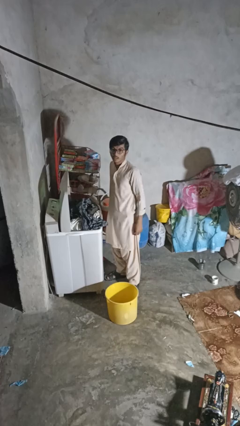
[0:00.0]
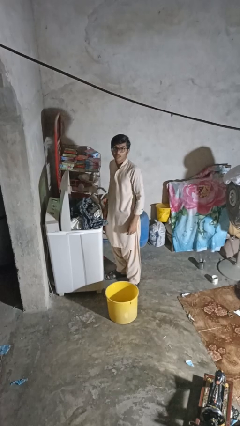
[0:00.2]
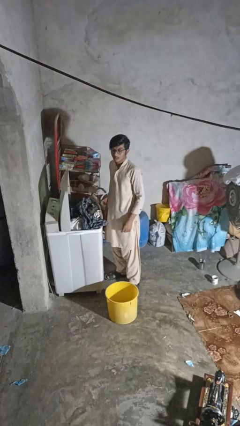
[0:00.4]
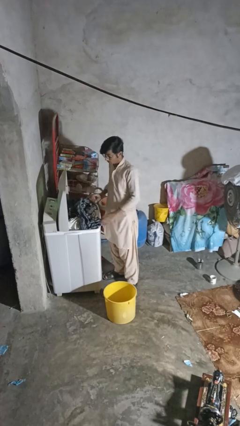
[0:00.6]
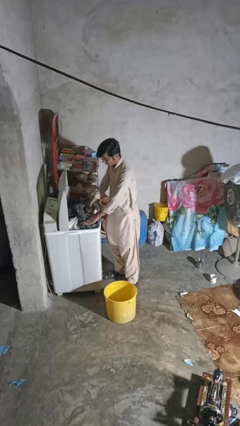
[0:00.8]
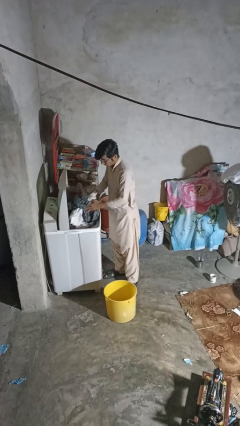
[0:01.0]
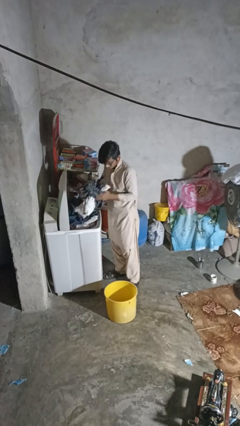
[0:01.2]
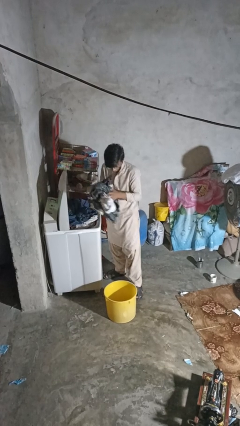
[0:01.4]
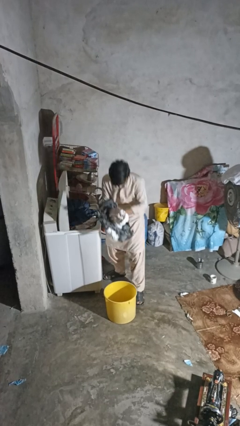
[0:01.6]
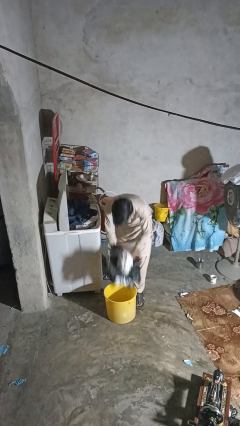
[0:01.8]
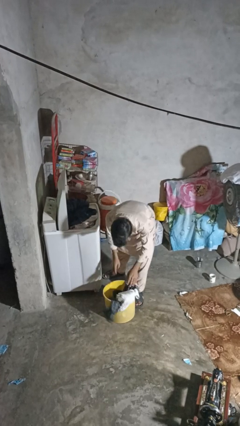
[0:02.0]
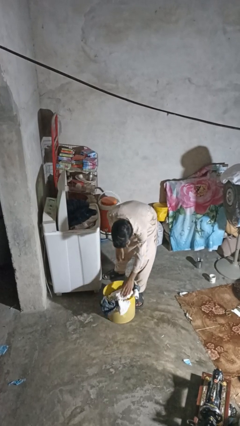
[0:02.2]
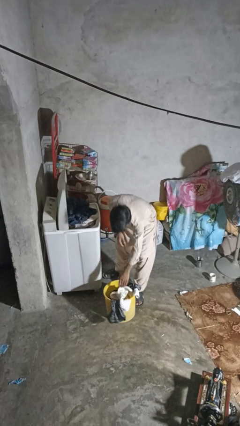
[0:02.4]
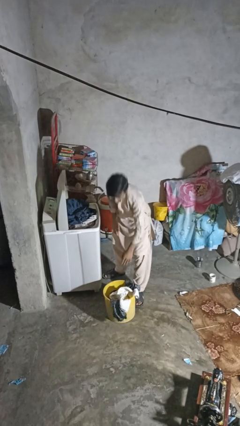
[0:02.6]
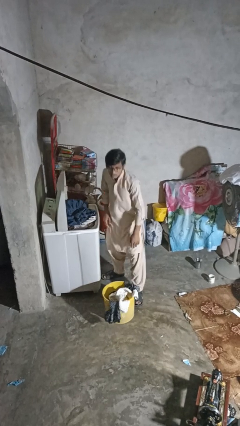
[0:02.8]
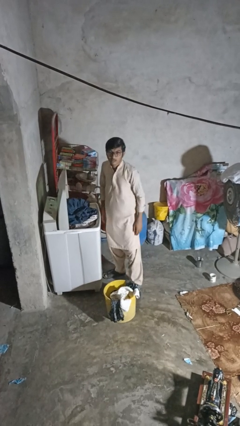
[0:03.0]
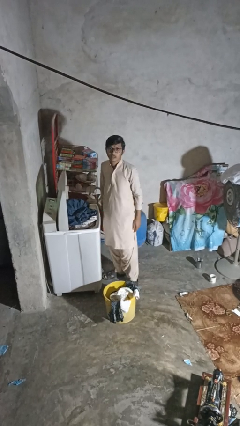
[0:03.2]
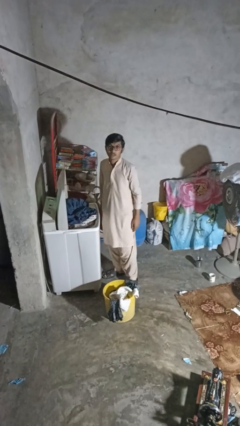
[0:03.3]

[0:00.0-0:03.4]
person unloads clotheswasher

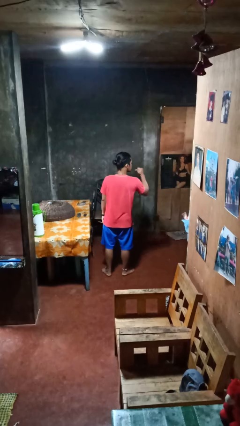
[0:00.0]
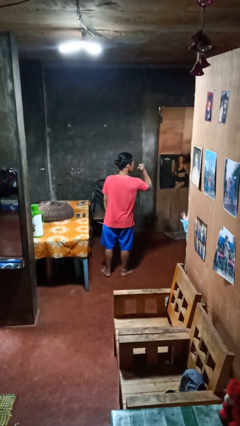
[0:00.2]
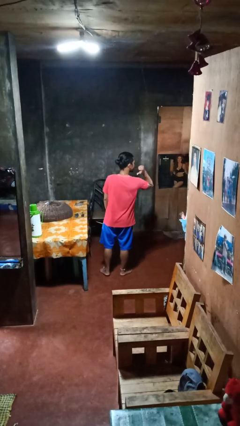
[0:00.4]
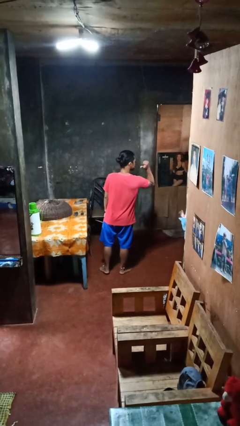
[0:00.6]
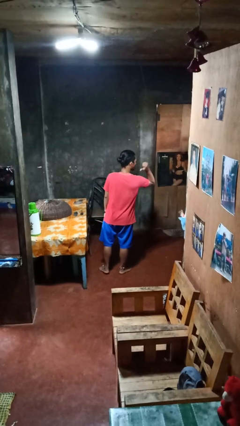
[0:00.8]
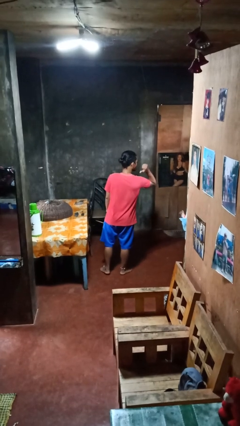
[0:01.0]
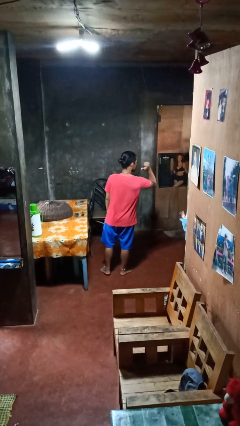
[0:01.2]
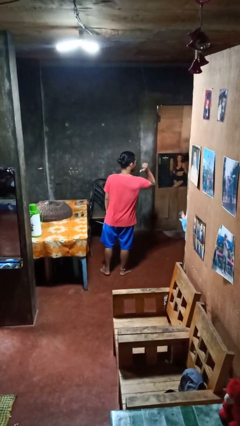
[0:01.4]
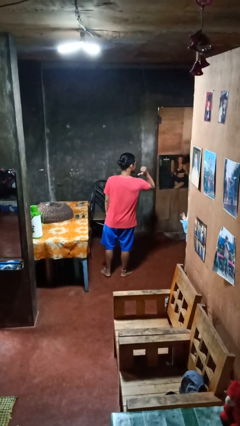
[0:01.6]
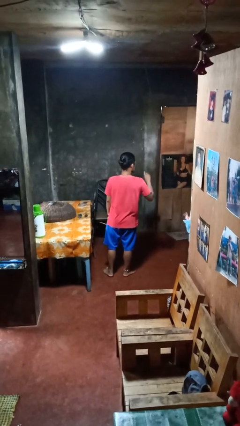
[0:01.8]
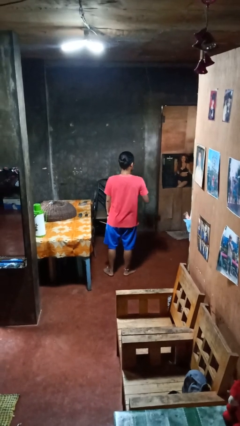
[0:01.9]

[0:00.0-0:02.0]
person gestures behind me

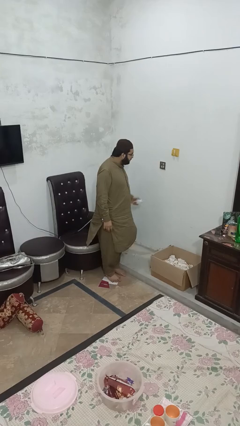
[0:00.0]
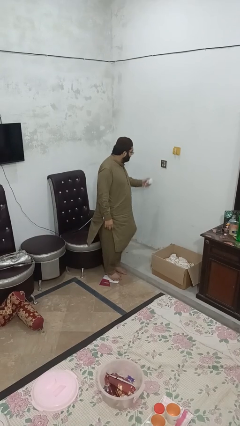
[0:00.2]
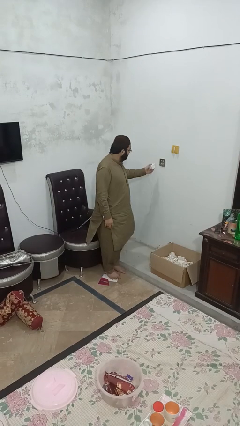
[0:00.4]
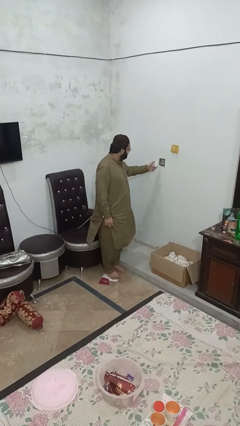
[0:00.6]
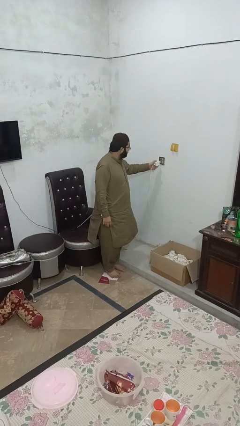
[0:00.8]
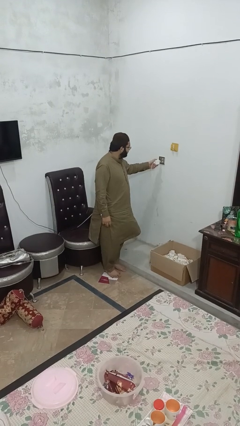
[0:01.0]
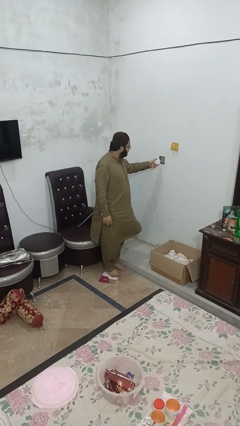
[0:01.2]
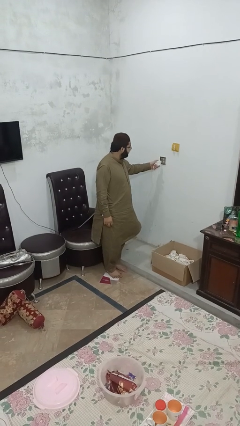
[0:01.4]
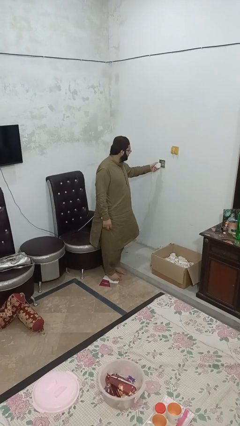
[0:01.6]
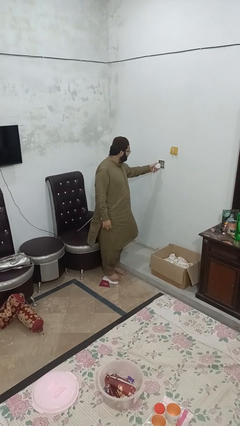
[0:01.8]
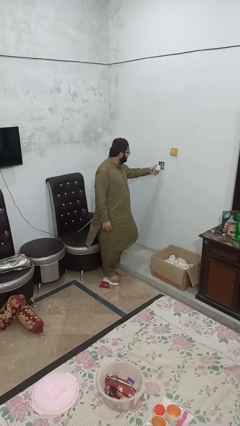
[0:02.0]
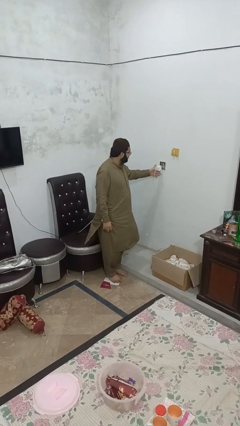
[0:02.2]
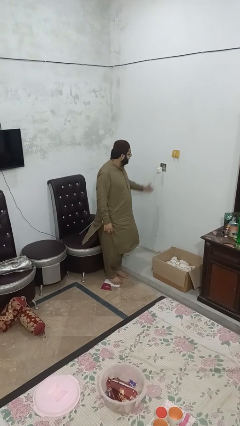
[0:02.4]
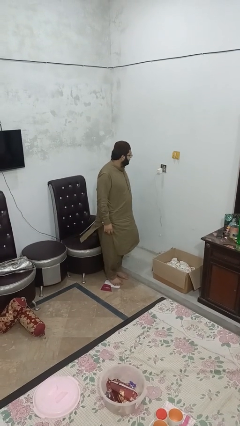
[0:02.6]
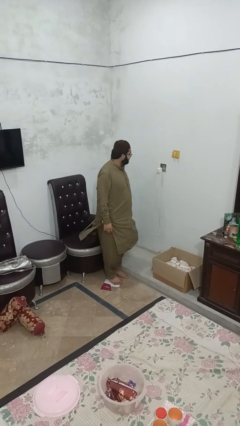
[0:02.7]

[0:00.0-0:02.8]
person plugs into electrical socket

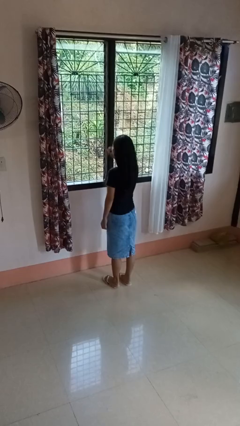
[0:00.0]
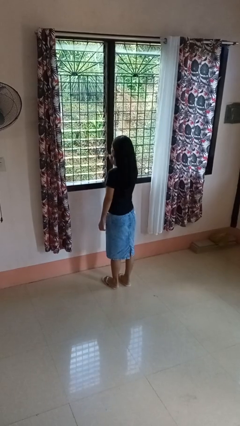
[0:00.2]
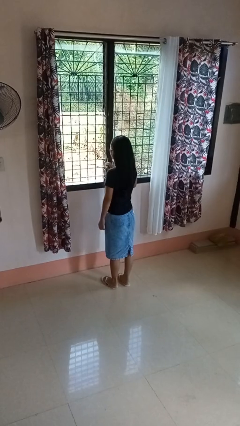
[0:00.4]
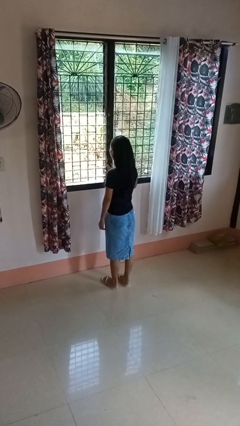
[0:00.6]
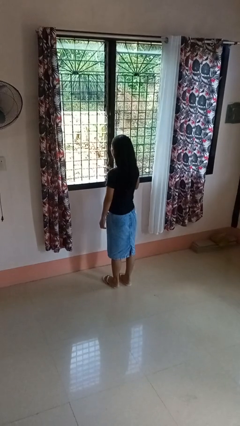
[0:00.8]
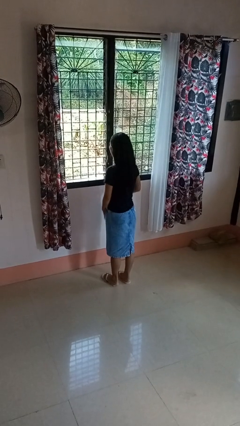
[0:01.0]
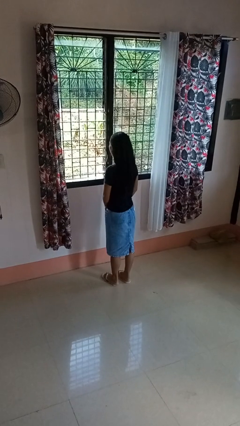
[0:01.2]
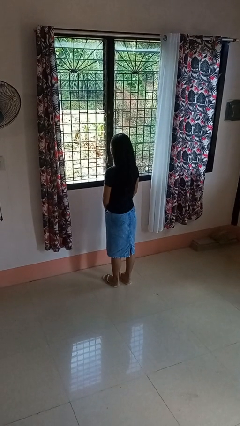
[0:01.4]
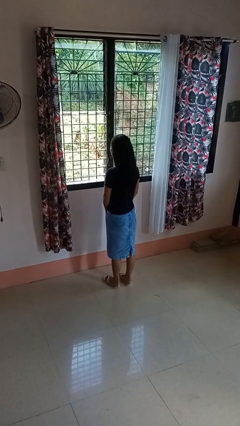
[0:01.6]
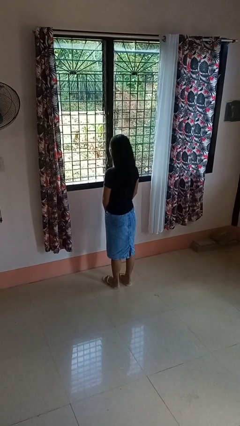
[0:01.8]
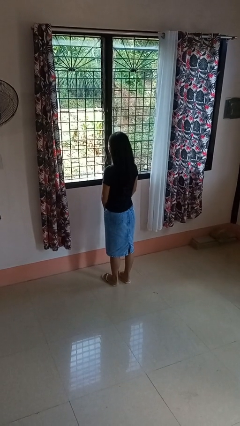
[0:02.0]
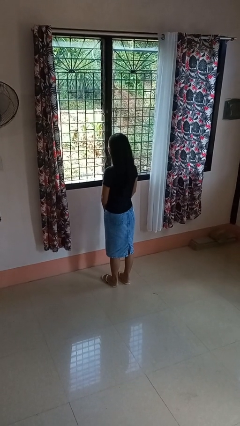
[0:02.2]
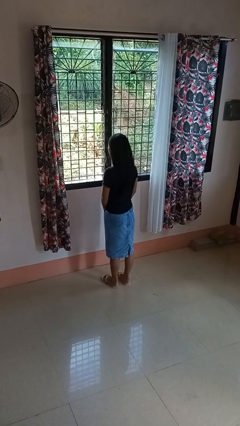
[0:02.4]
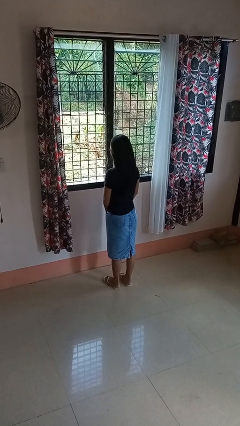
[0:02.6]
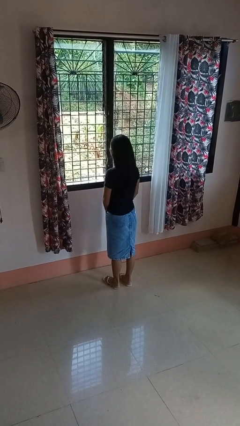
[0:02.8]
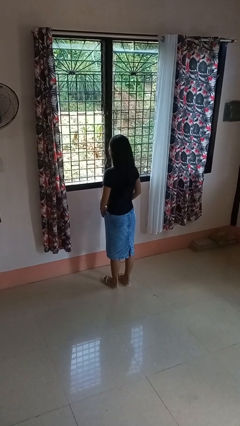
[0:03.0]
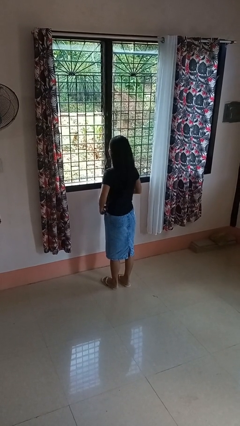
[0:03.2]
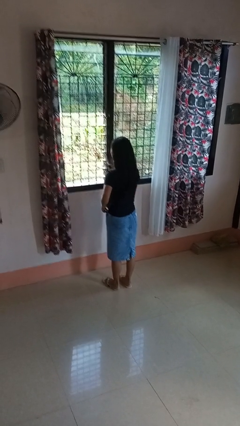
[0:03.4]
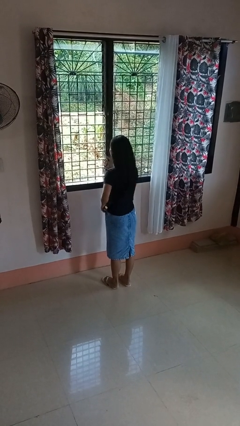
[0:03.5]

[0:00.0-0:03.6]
person opens home window

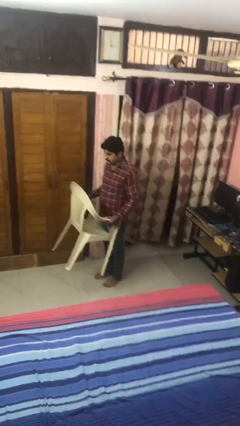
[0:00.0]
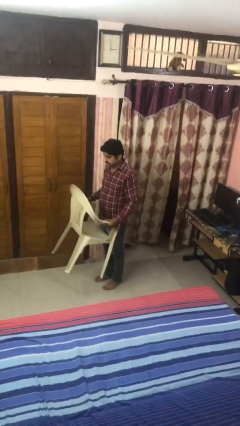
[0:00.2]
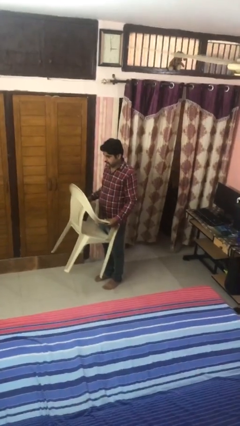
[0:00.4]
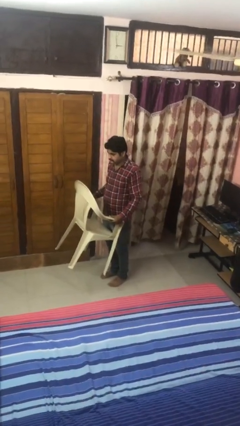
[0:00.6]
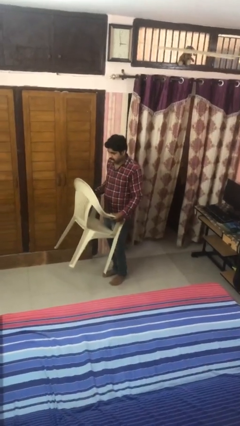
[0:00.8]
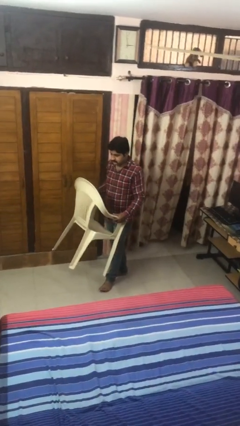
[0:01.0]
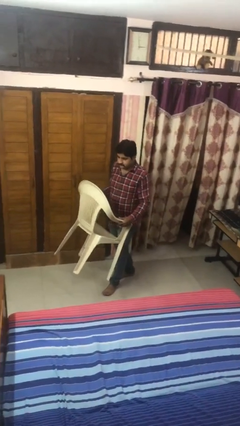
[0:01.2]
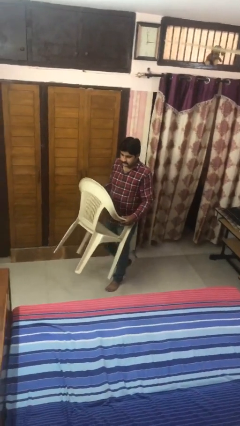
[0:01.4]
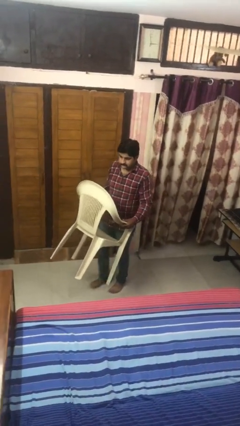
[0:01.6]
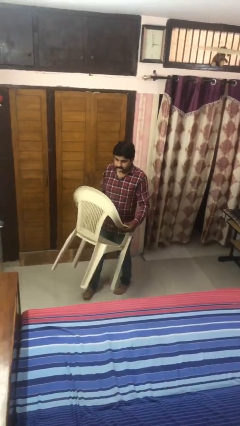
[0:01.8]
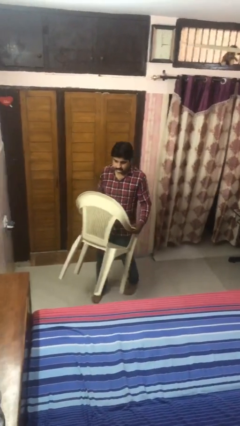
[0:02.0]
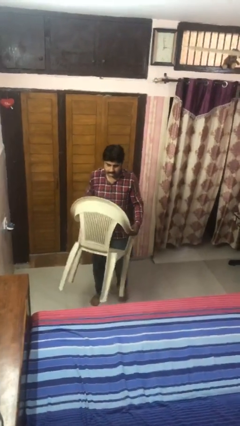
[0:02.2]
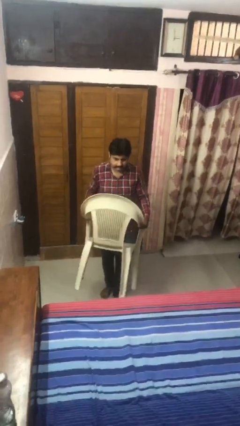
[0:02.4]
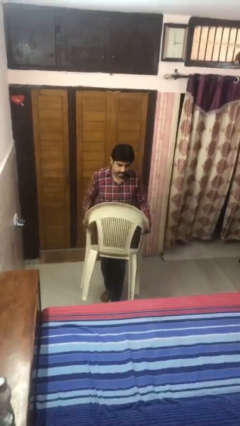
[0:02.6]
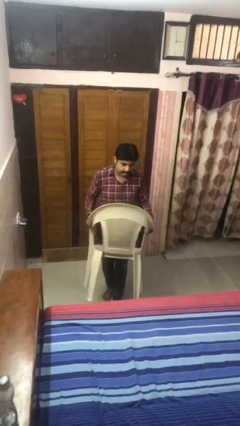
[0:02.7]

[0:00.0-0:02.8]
person carries furniture

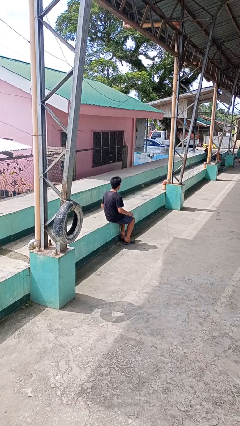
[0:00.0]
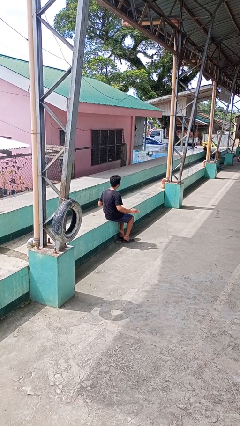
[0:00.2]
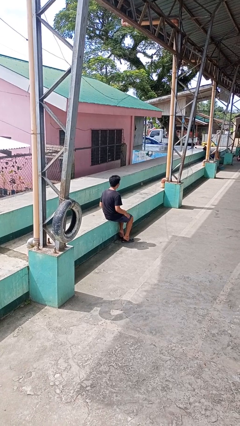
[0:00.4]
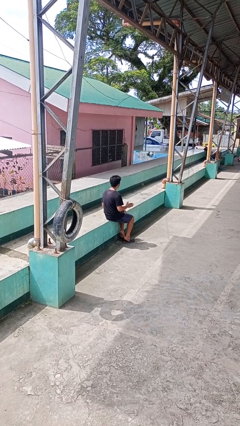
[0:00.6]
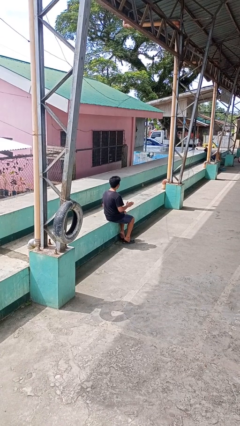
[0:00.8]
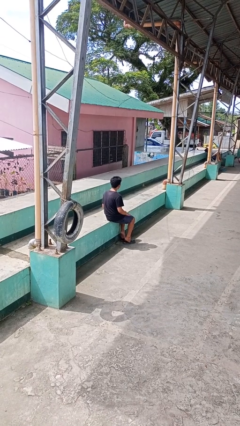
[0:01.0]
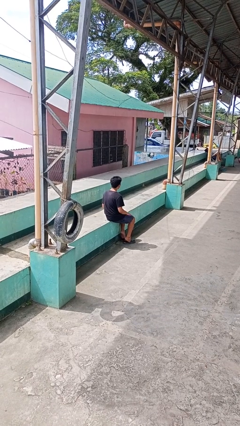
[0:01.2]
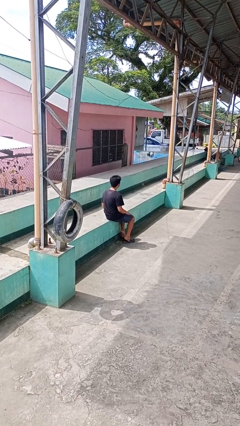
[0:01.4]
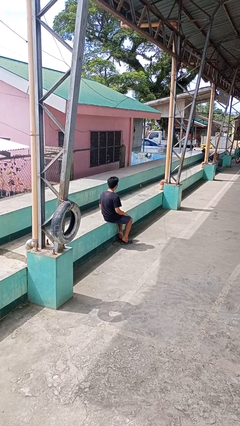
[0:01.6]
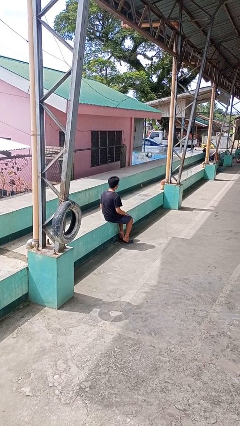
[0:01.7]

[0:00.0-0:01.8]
person slaps hands on thighs

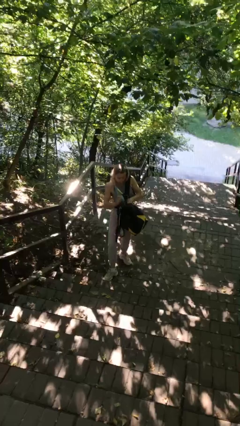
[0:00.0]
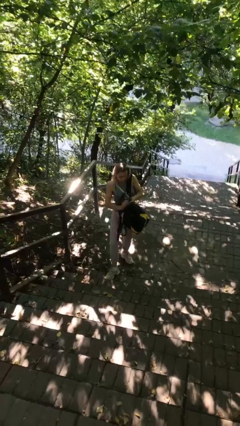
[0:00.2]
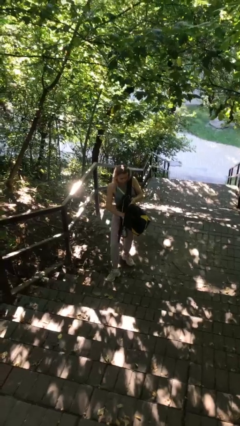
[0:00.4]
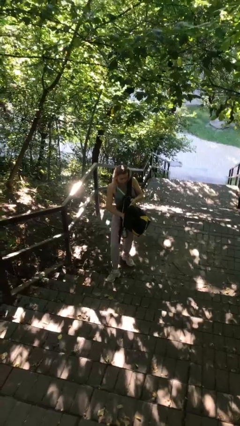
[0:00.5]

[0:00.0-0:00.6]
person puts object into backpack
